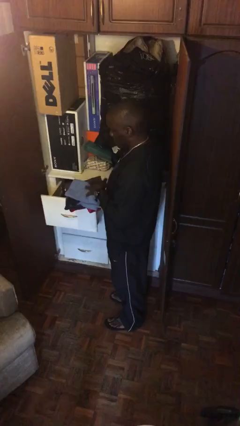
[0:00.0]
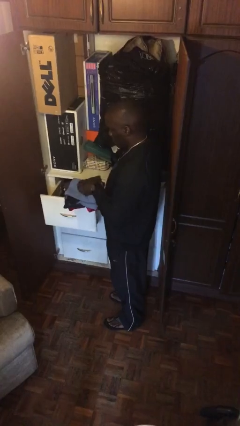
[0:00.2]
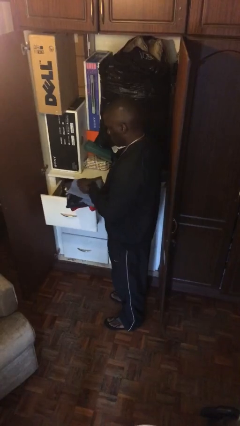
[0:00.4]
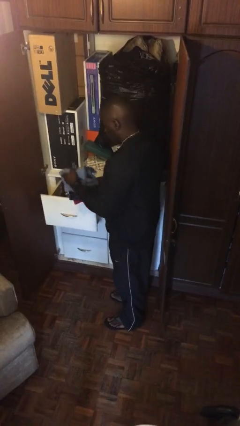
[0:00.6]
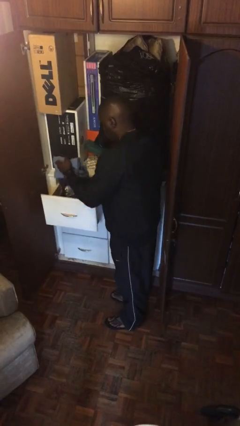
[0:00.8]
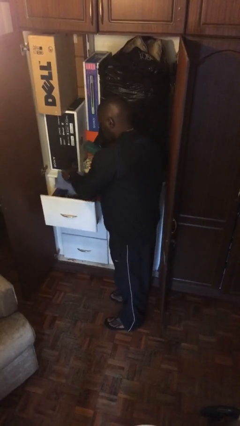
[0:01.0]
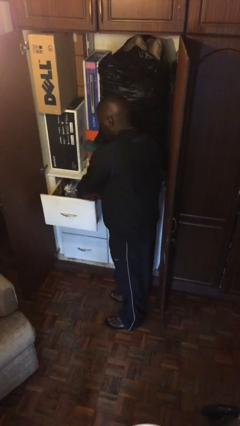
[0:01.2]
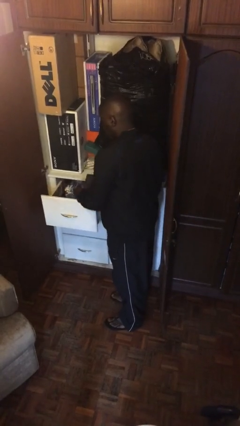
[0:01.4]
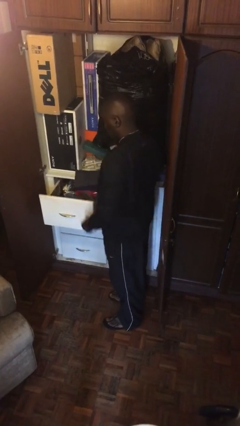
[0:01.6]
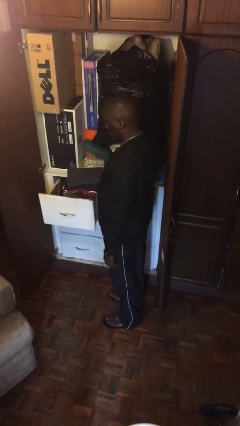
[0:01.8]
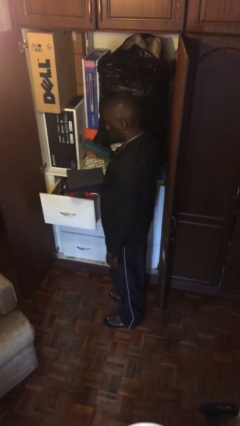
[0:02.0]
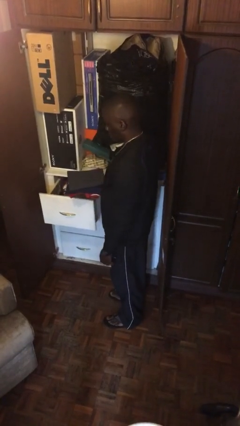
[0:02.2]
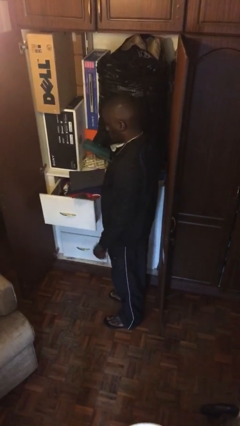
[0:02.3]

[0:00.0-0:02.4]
person puts clothes into dresser

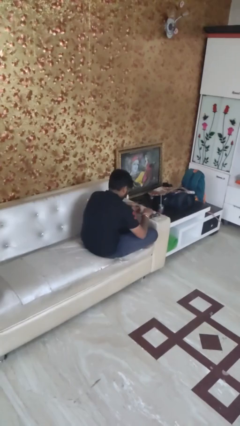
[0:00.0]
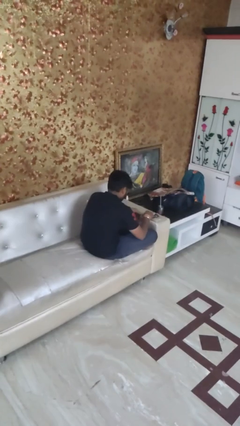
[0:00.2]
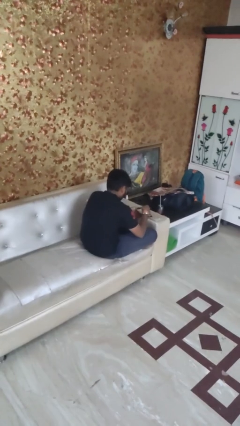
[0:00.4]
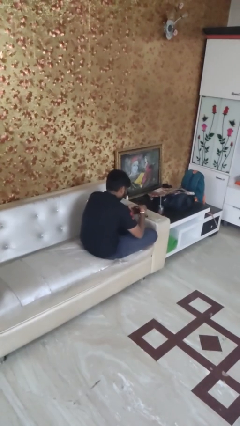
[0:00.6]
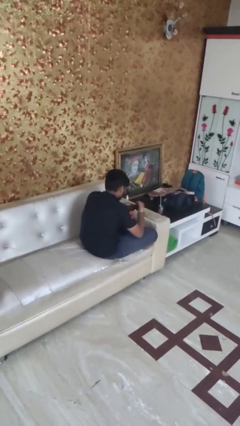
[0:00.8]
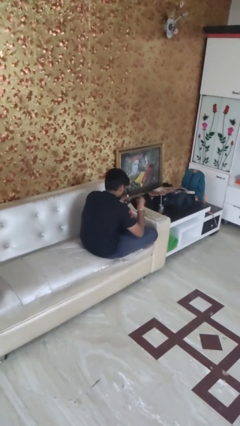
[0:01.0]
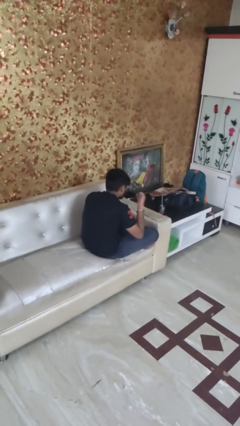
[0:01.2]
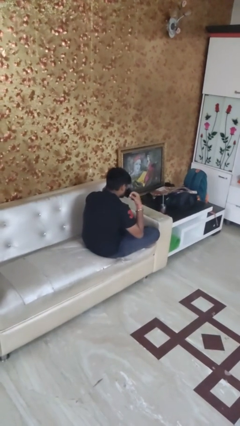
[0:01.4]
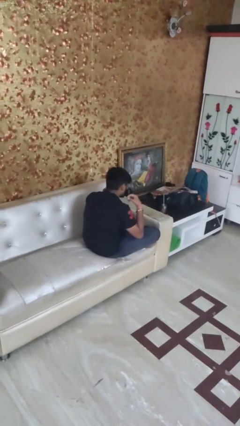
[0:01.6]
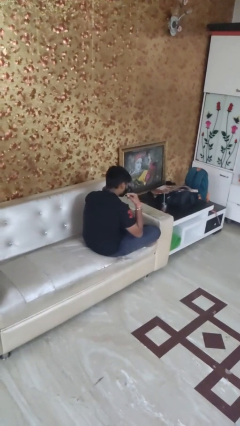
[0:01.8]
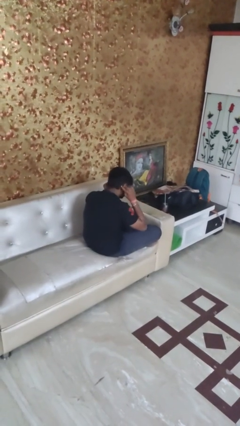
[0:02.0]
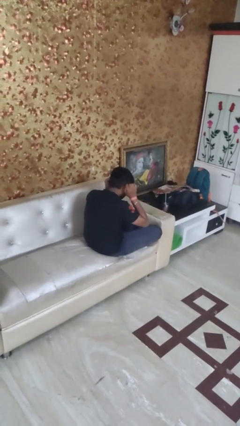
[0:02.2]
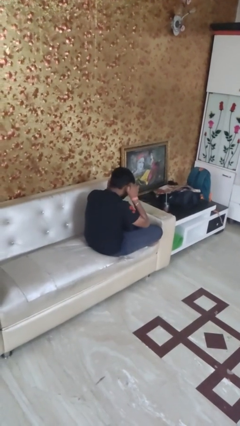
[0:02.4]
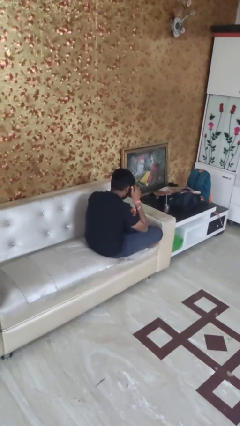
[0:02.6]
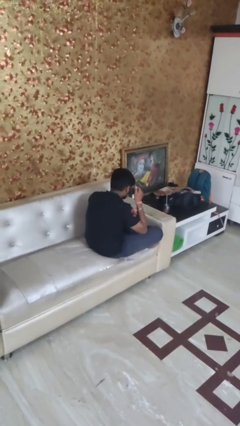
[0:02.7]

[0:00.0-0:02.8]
person puts on facemask

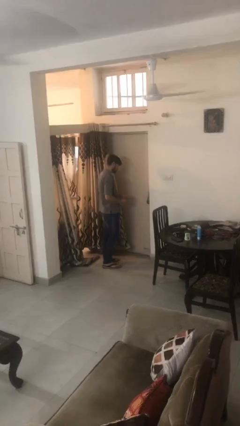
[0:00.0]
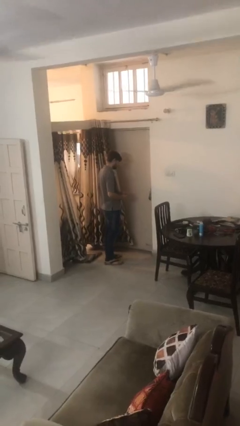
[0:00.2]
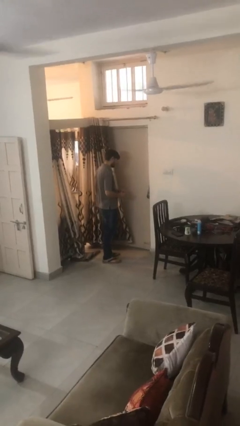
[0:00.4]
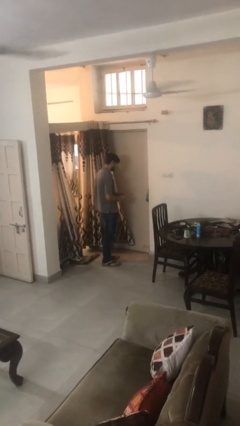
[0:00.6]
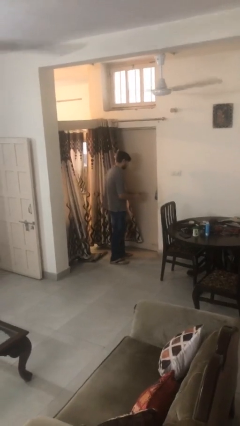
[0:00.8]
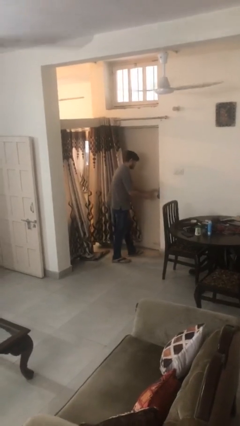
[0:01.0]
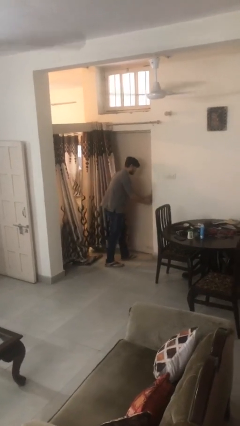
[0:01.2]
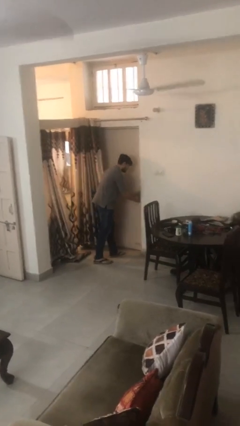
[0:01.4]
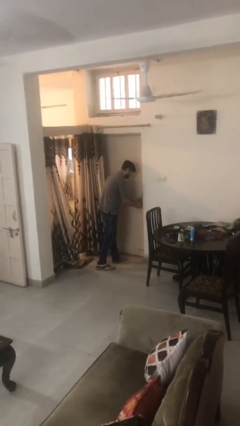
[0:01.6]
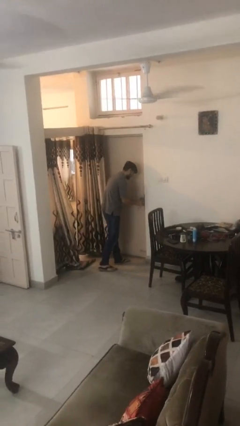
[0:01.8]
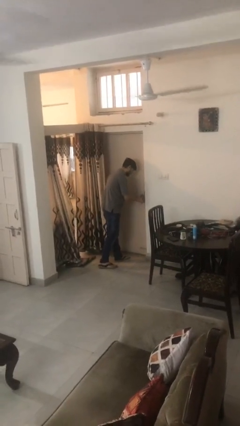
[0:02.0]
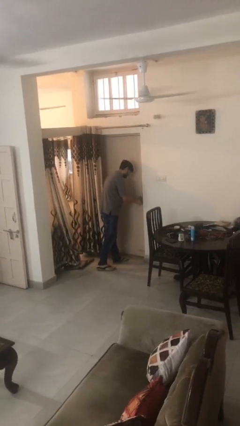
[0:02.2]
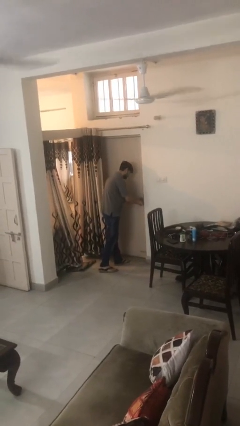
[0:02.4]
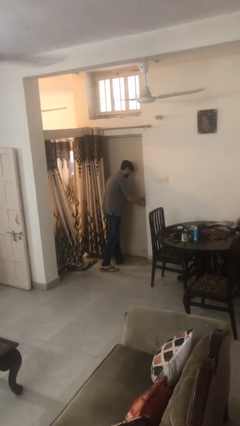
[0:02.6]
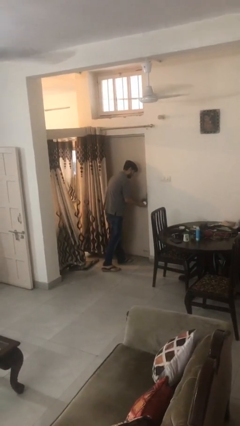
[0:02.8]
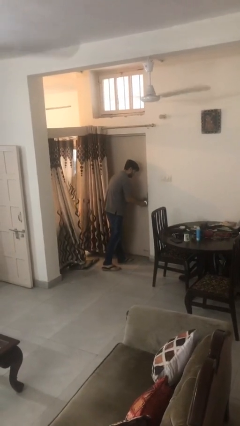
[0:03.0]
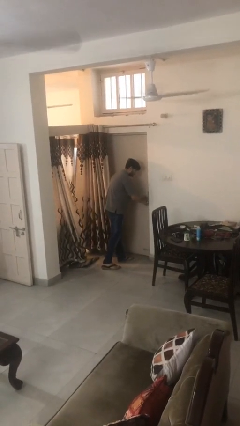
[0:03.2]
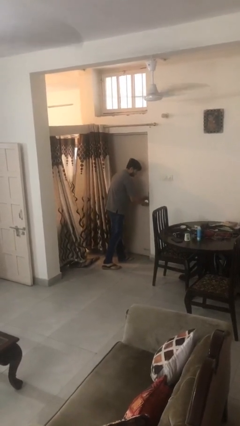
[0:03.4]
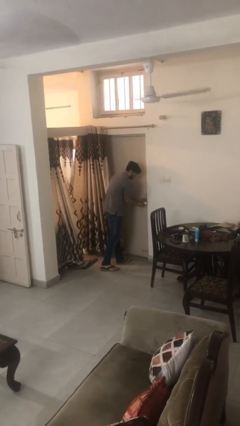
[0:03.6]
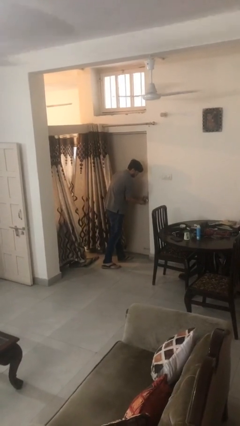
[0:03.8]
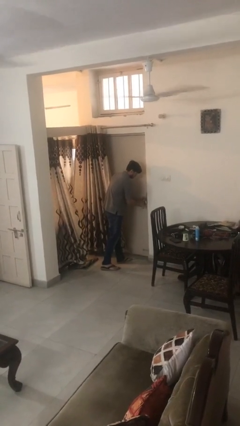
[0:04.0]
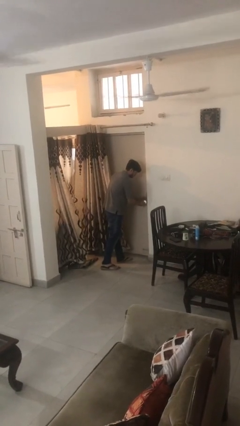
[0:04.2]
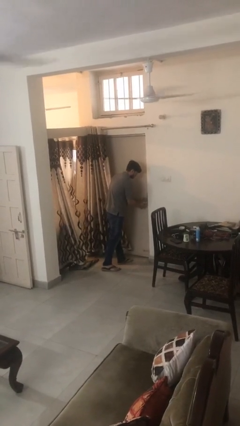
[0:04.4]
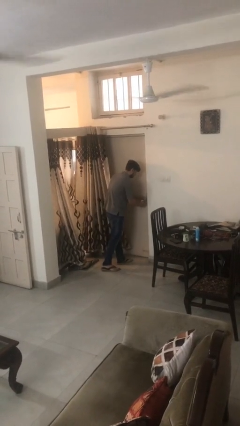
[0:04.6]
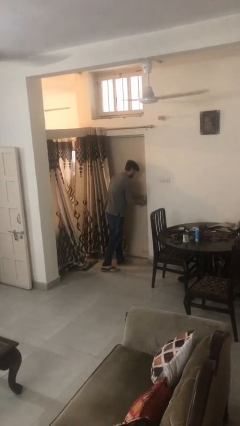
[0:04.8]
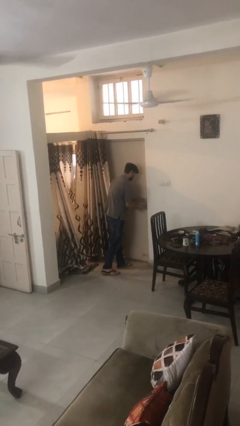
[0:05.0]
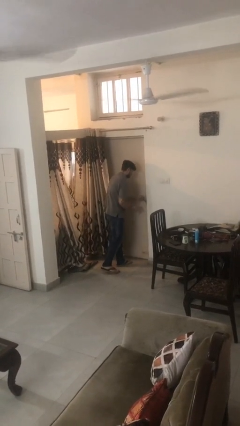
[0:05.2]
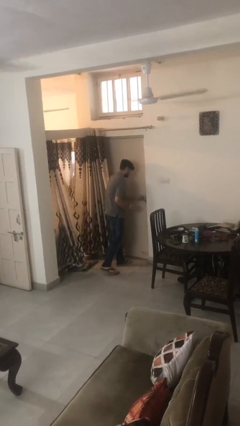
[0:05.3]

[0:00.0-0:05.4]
person unlocks door with keys

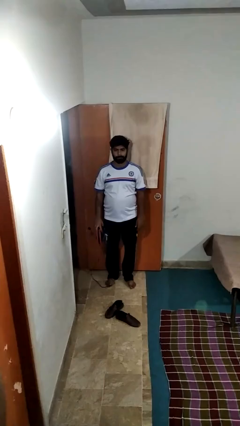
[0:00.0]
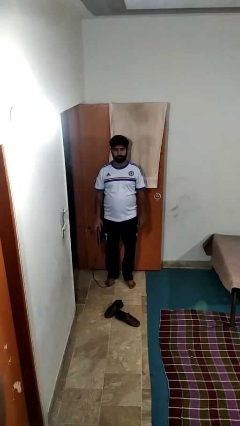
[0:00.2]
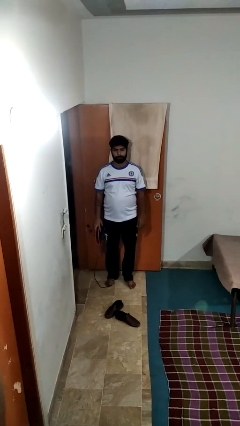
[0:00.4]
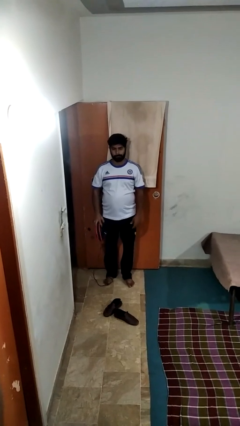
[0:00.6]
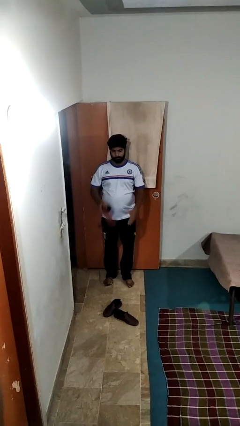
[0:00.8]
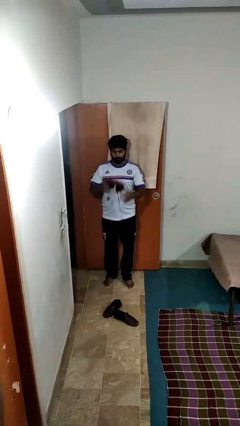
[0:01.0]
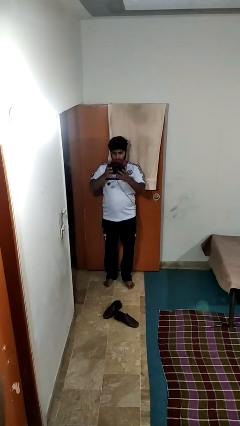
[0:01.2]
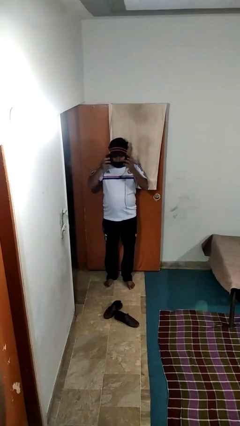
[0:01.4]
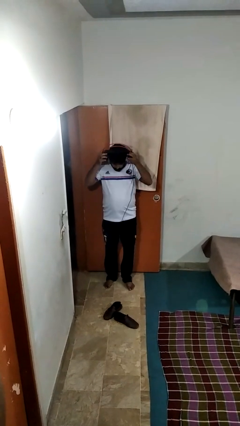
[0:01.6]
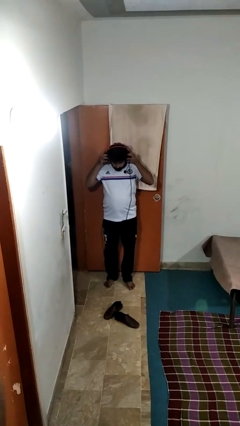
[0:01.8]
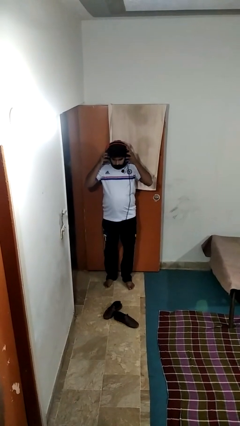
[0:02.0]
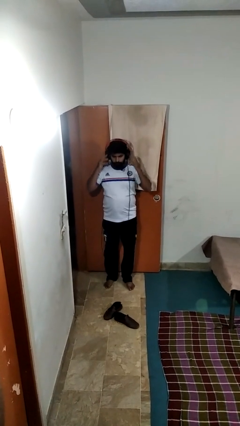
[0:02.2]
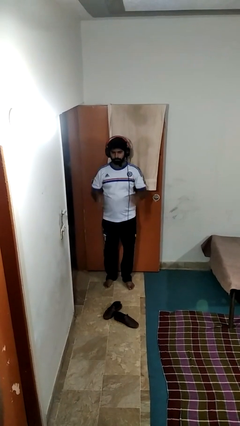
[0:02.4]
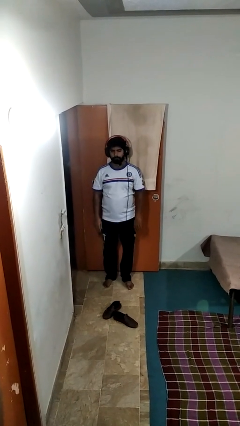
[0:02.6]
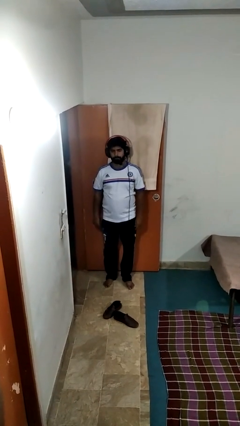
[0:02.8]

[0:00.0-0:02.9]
person puts on headphones

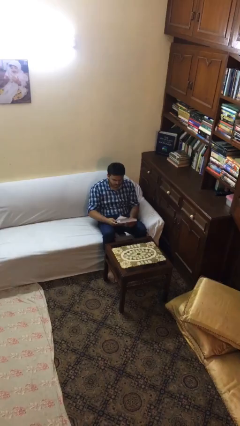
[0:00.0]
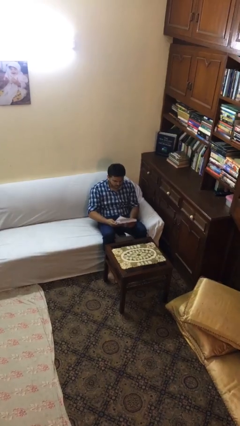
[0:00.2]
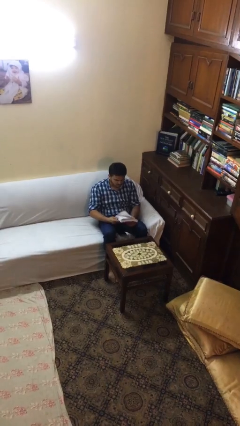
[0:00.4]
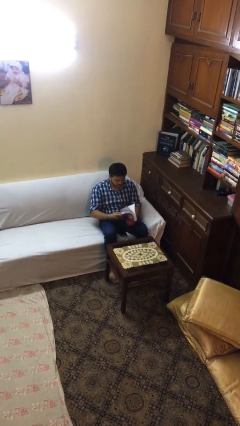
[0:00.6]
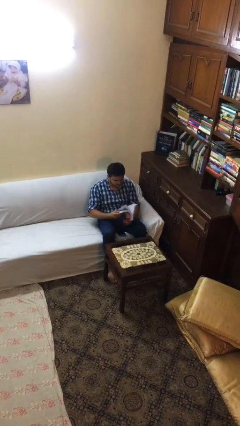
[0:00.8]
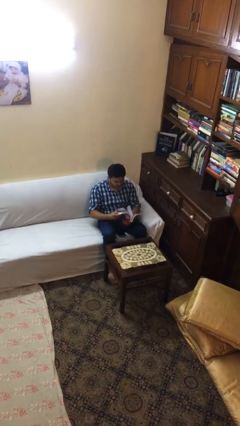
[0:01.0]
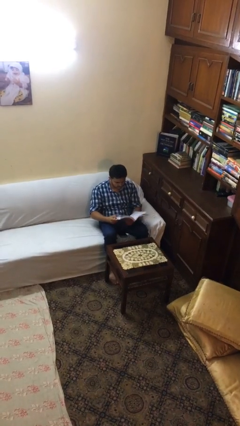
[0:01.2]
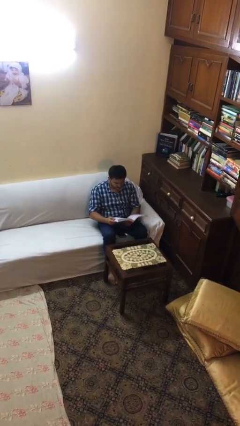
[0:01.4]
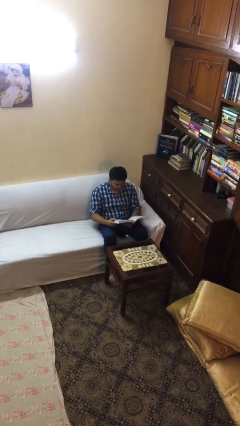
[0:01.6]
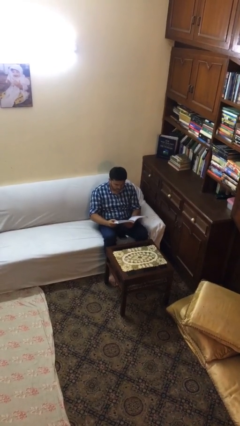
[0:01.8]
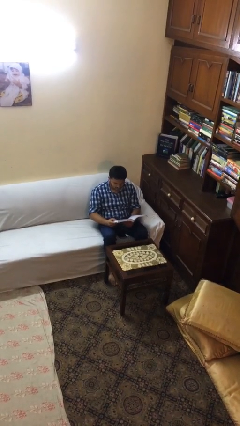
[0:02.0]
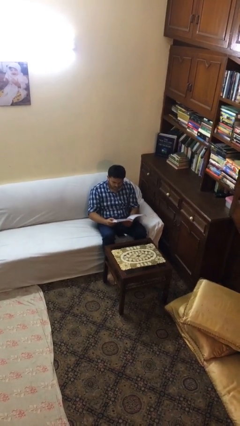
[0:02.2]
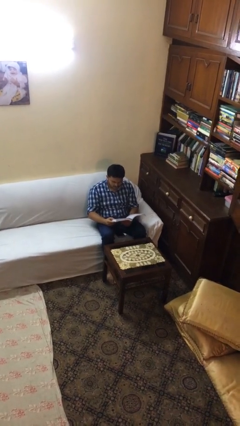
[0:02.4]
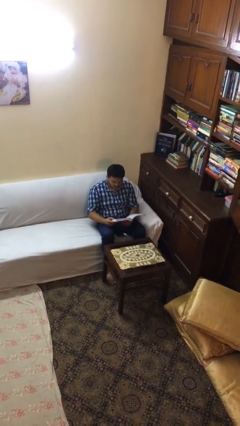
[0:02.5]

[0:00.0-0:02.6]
person reads document

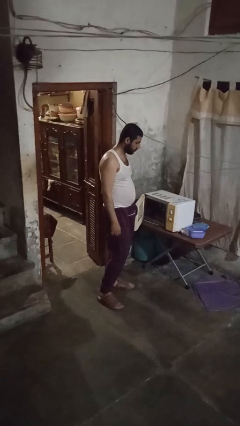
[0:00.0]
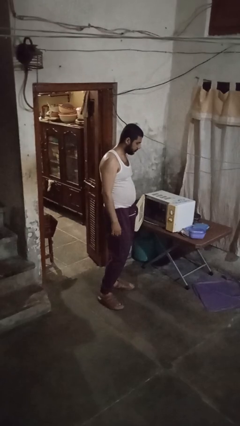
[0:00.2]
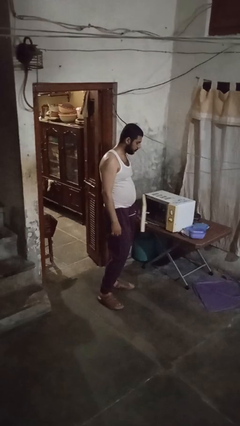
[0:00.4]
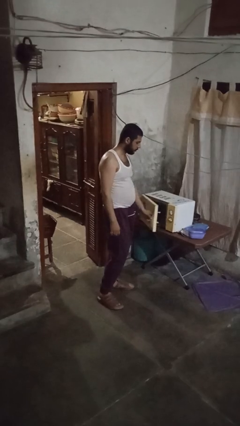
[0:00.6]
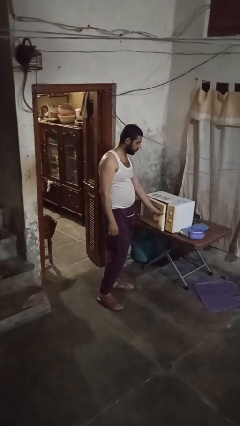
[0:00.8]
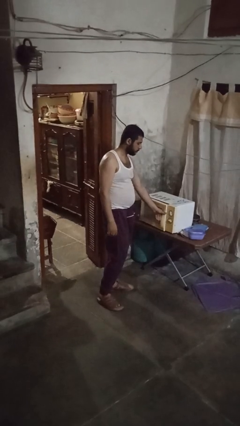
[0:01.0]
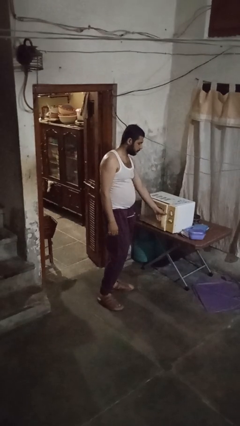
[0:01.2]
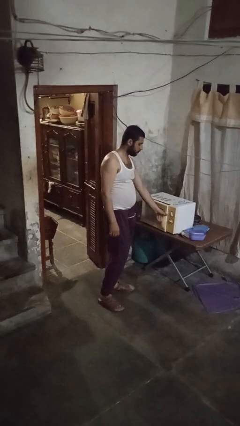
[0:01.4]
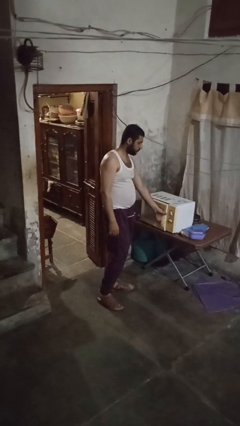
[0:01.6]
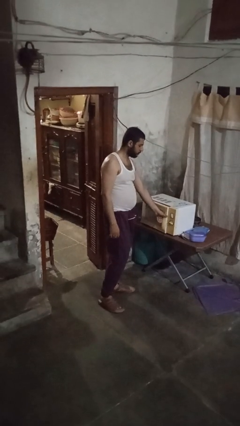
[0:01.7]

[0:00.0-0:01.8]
person closes microwave
